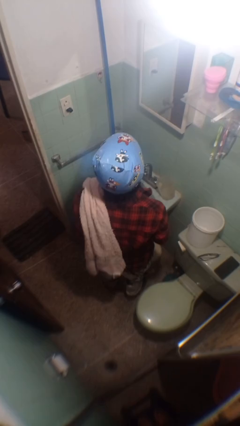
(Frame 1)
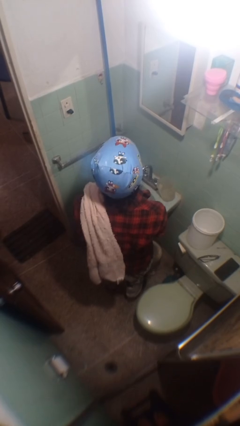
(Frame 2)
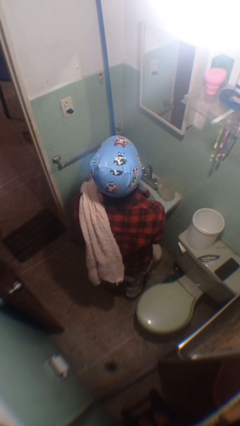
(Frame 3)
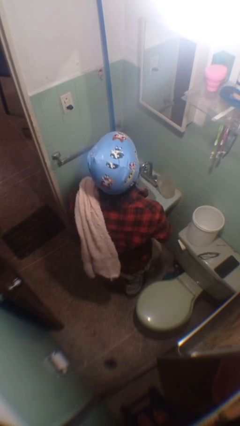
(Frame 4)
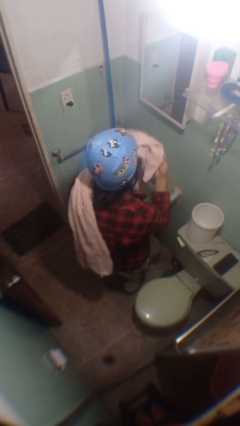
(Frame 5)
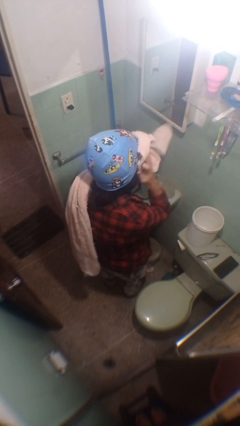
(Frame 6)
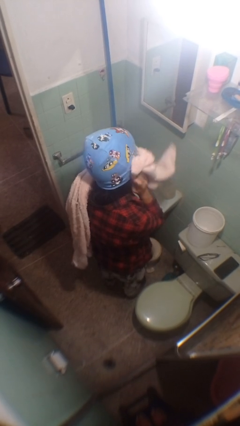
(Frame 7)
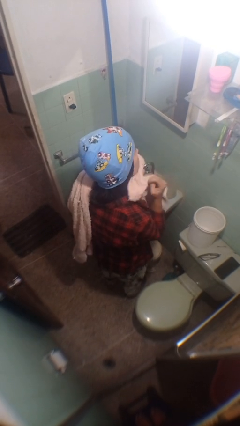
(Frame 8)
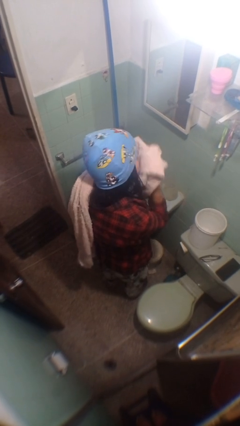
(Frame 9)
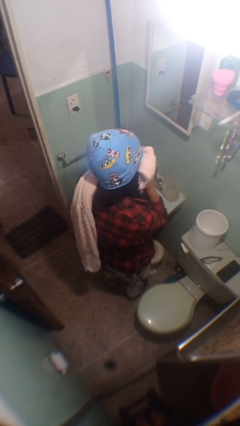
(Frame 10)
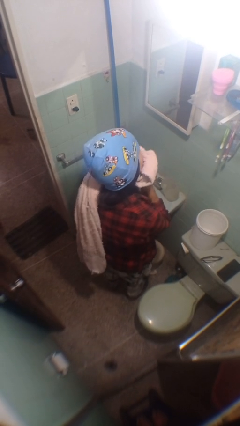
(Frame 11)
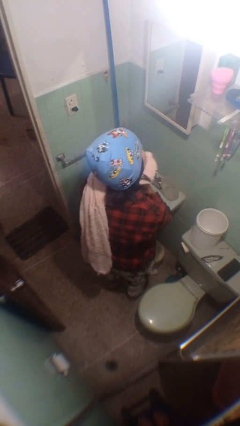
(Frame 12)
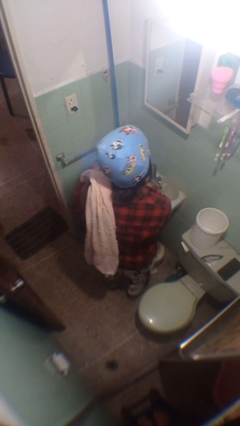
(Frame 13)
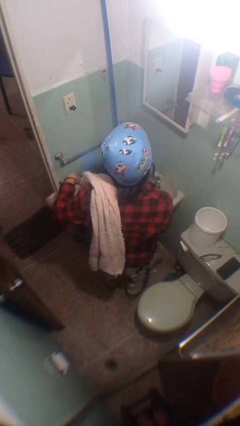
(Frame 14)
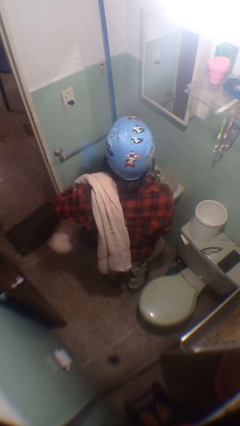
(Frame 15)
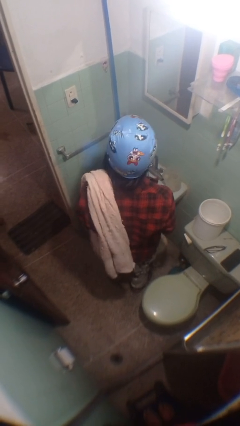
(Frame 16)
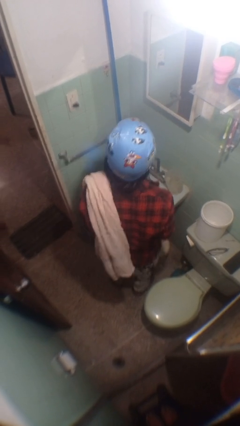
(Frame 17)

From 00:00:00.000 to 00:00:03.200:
person dries face with towel

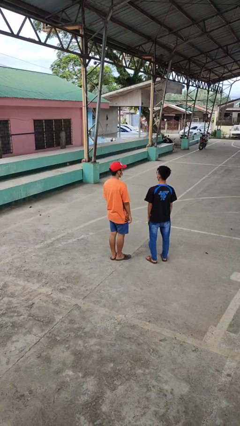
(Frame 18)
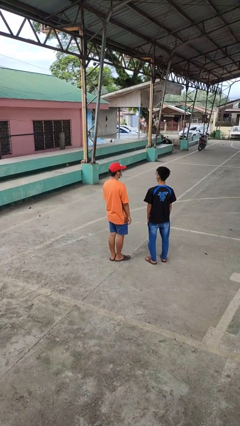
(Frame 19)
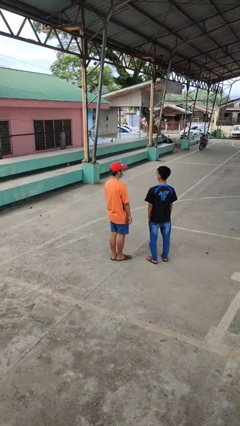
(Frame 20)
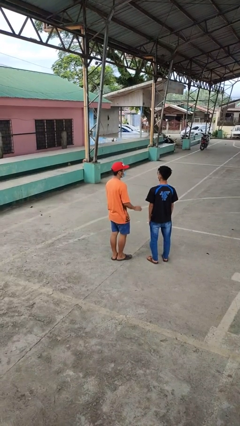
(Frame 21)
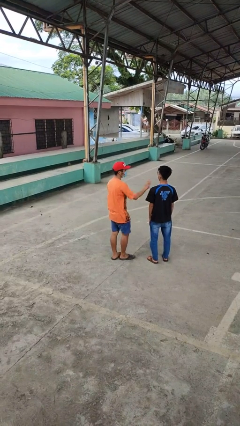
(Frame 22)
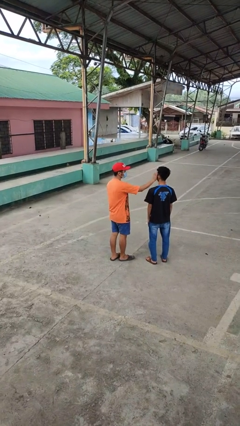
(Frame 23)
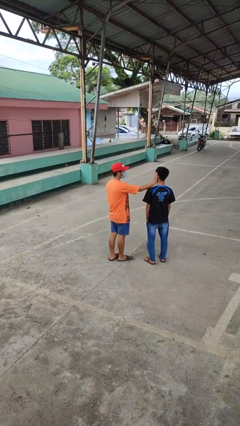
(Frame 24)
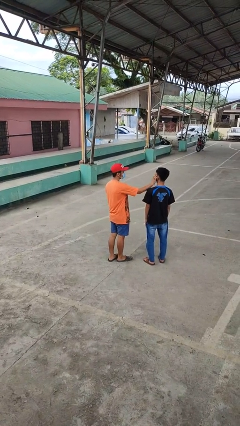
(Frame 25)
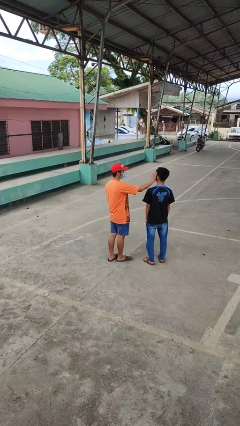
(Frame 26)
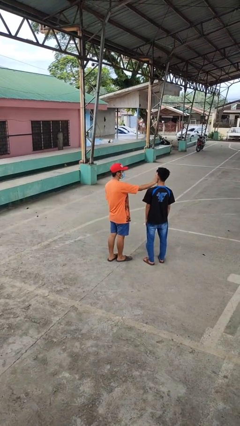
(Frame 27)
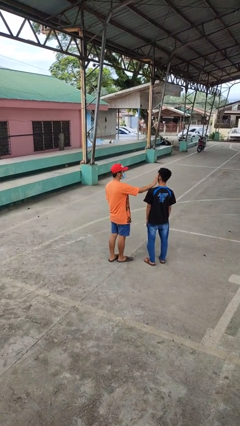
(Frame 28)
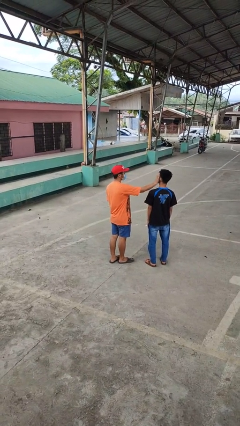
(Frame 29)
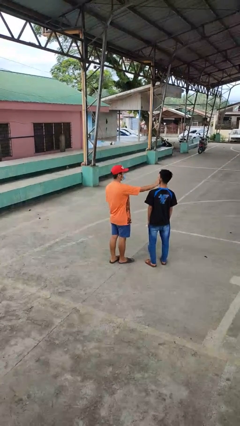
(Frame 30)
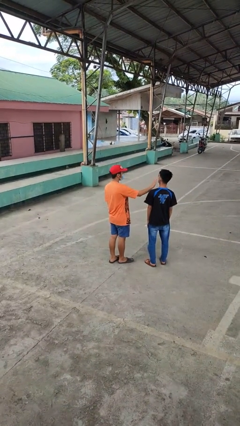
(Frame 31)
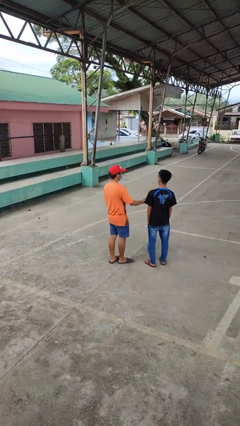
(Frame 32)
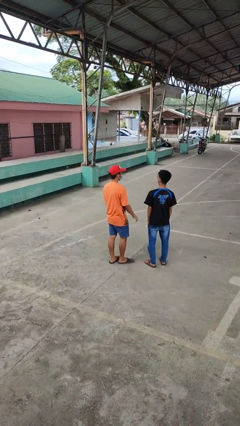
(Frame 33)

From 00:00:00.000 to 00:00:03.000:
person touches face of person

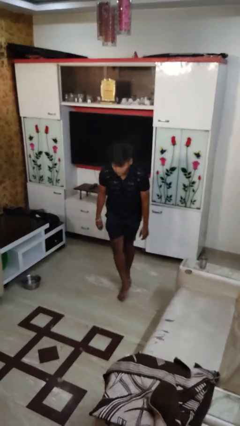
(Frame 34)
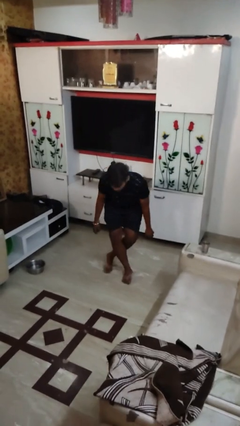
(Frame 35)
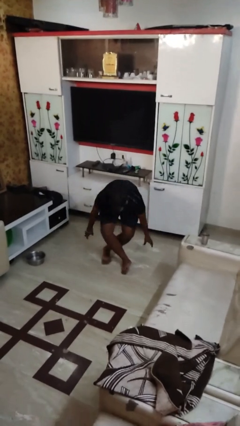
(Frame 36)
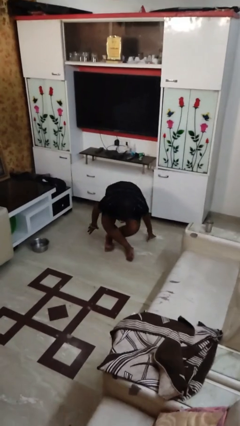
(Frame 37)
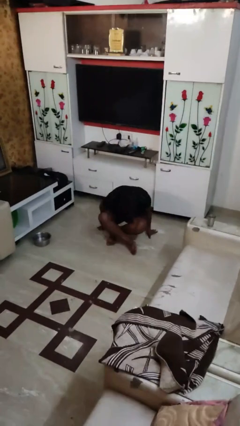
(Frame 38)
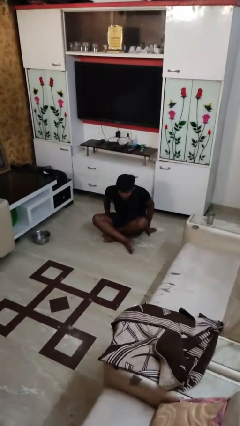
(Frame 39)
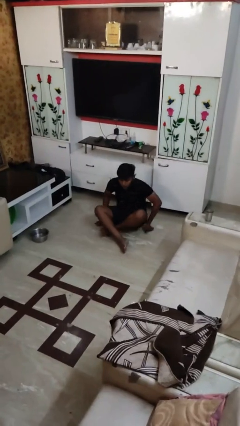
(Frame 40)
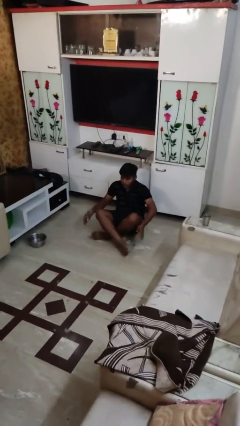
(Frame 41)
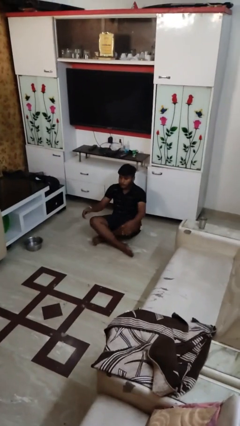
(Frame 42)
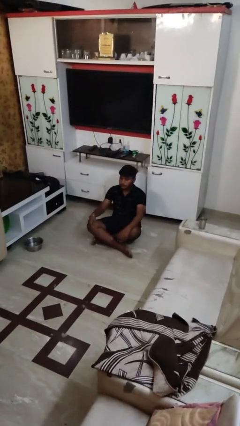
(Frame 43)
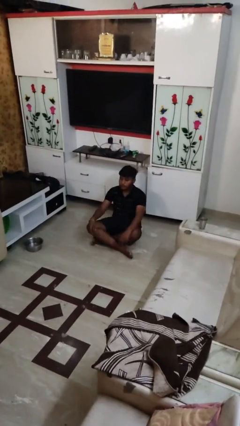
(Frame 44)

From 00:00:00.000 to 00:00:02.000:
person sits crisscross

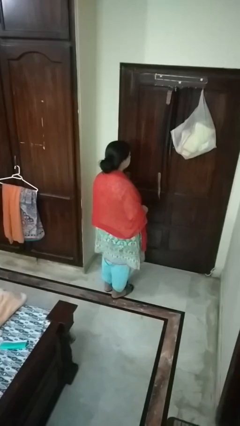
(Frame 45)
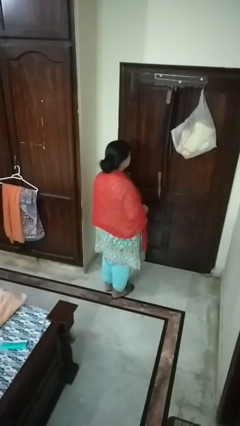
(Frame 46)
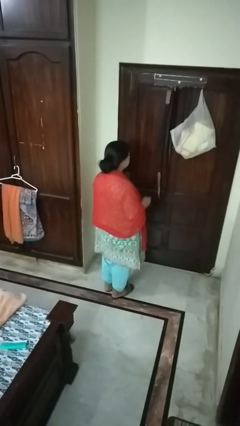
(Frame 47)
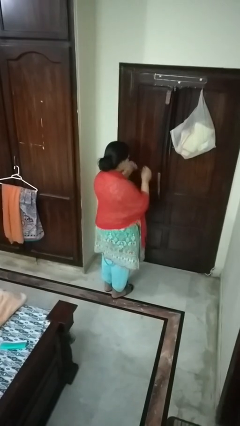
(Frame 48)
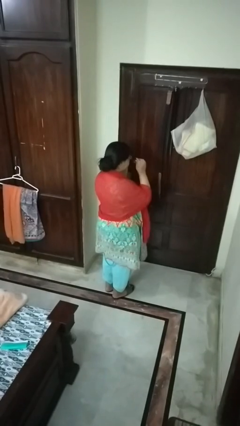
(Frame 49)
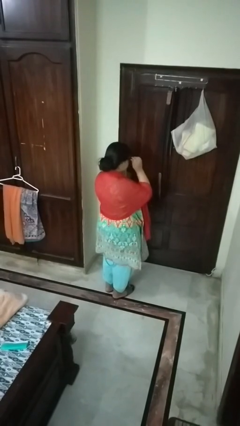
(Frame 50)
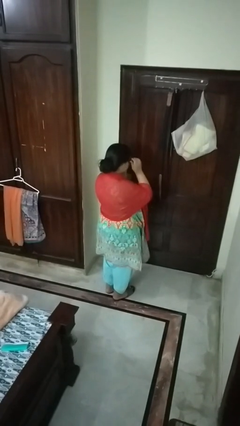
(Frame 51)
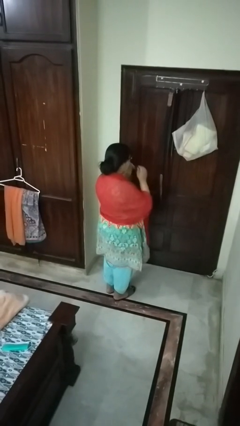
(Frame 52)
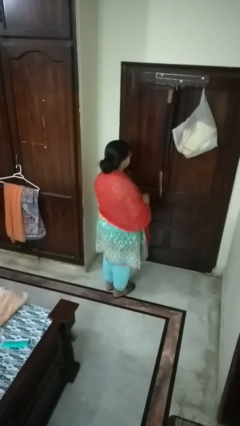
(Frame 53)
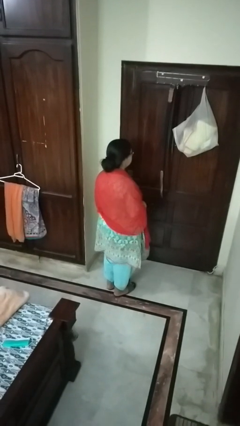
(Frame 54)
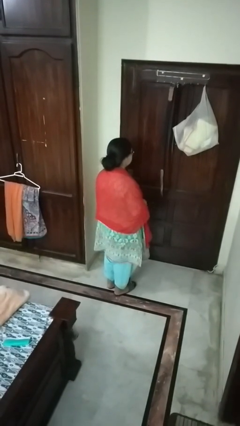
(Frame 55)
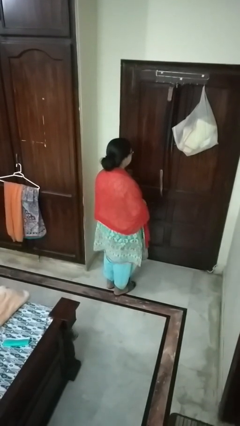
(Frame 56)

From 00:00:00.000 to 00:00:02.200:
person puts on glasses

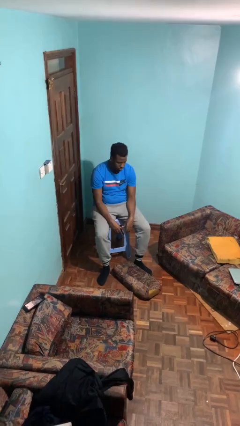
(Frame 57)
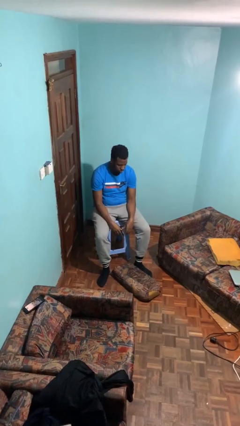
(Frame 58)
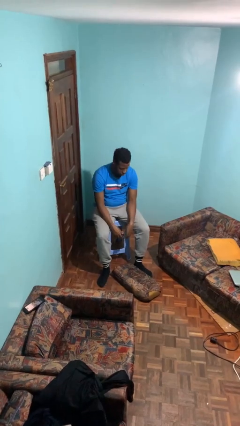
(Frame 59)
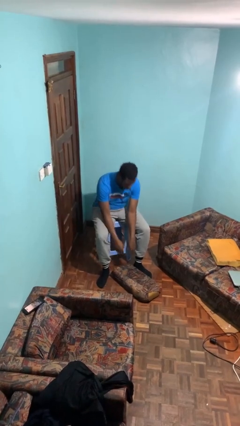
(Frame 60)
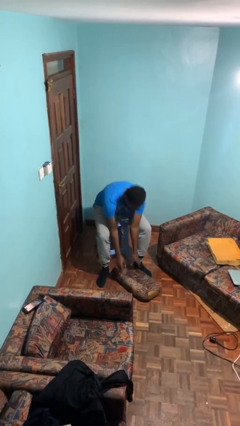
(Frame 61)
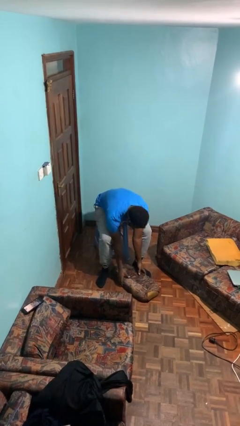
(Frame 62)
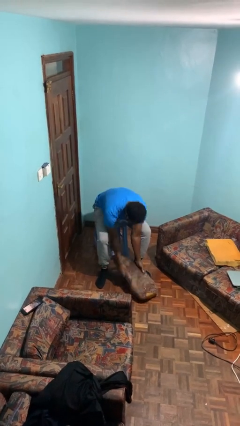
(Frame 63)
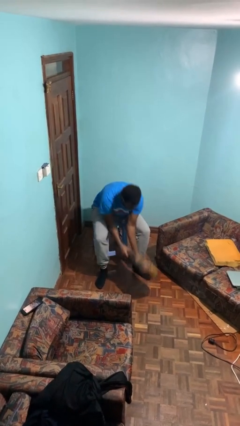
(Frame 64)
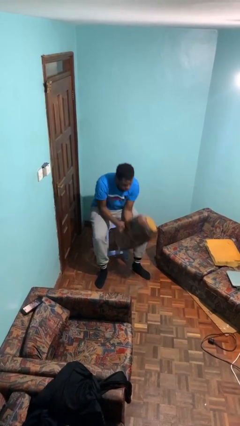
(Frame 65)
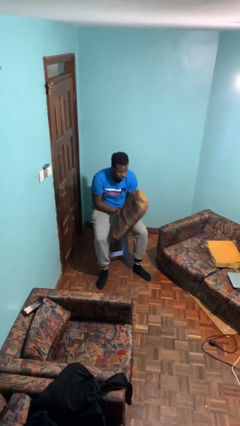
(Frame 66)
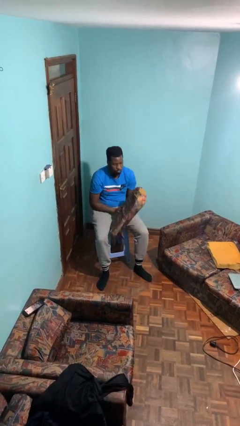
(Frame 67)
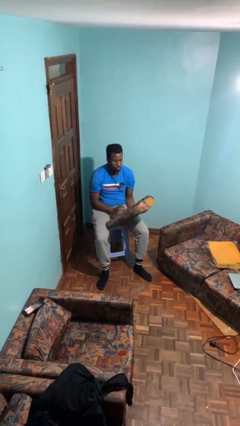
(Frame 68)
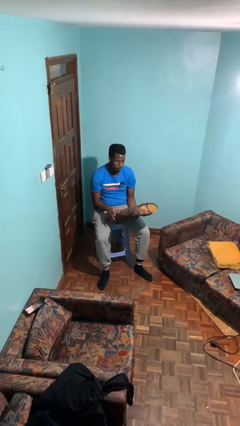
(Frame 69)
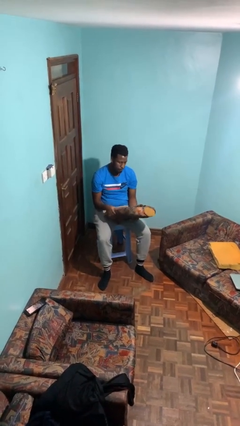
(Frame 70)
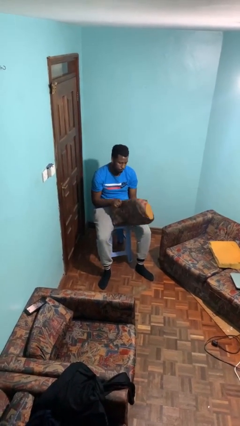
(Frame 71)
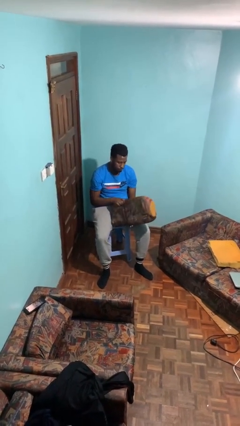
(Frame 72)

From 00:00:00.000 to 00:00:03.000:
person picks up object from floor

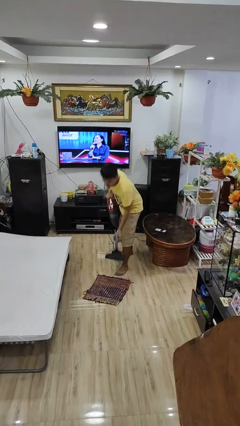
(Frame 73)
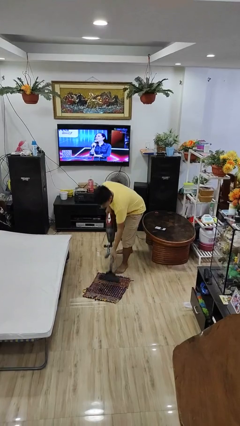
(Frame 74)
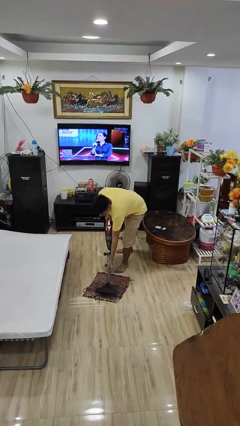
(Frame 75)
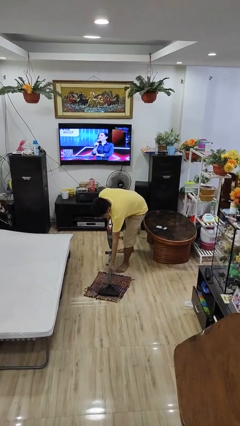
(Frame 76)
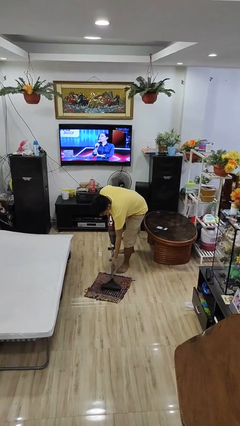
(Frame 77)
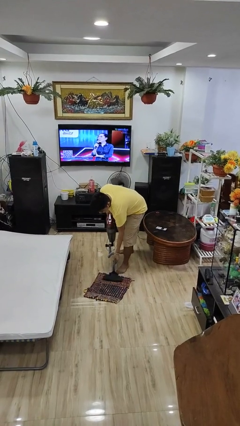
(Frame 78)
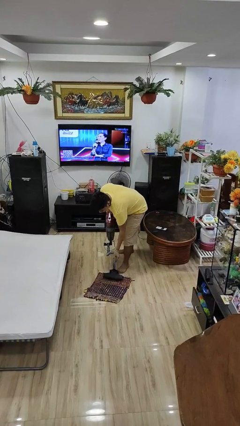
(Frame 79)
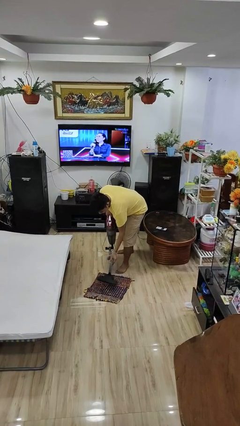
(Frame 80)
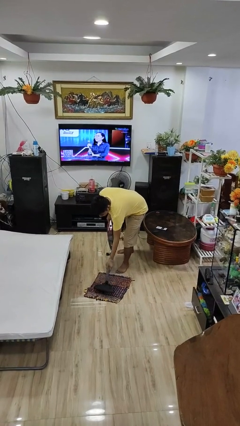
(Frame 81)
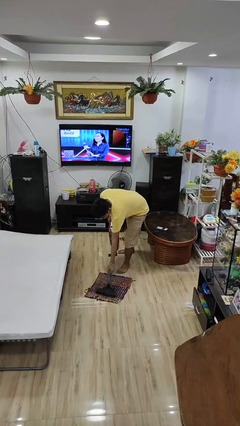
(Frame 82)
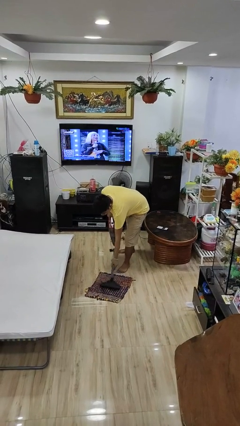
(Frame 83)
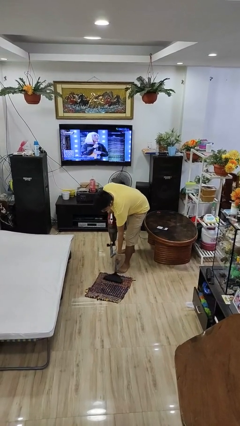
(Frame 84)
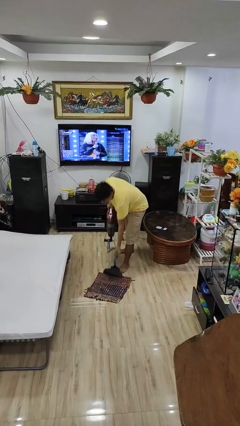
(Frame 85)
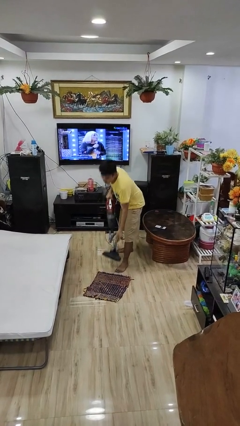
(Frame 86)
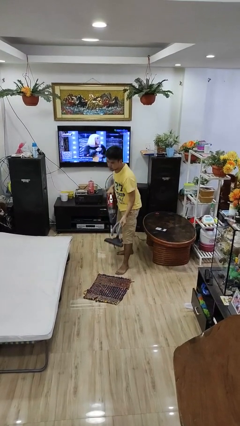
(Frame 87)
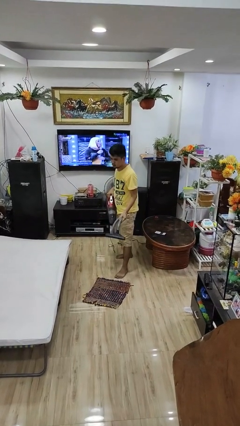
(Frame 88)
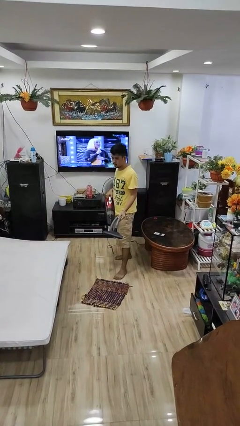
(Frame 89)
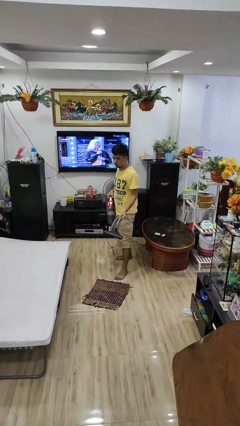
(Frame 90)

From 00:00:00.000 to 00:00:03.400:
person vacuums carpet

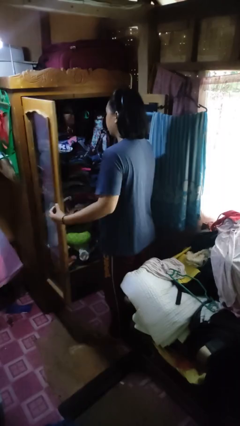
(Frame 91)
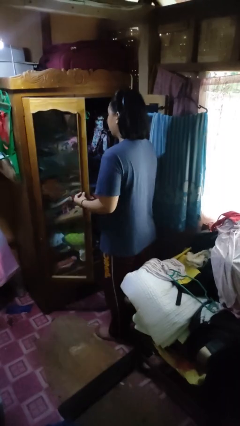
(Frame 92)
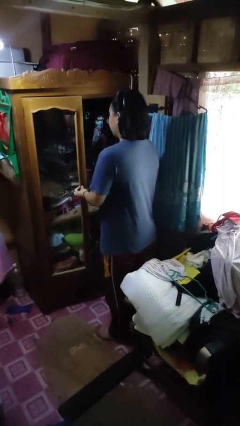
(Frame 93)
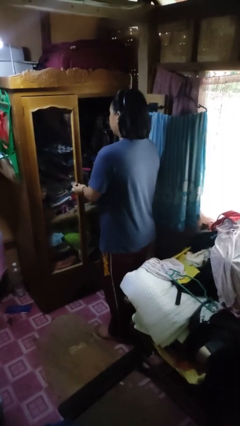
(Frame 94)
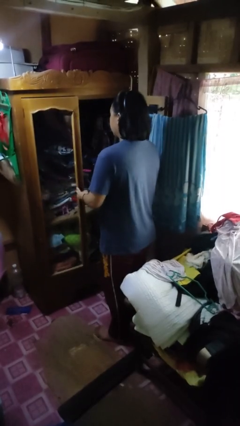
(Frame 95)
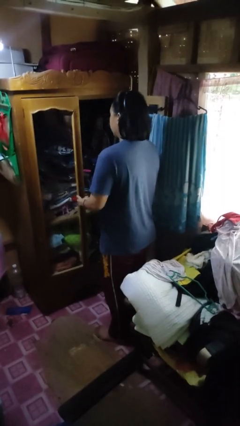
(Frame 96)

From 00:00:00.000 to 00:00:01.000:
person closes closet door
